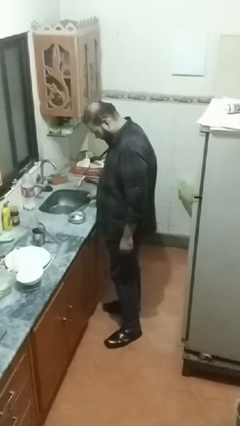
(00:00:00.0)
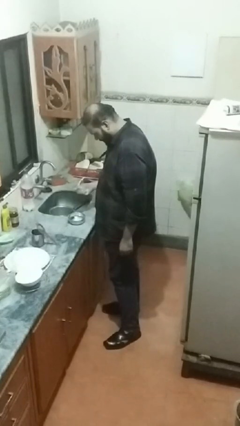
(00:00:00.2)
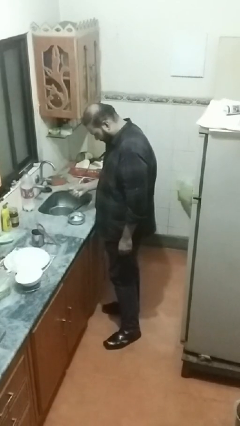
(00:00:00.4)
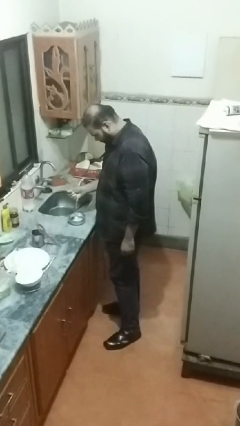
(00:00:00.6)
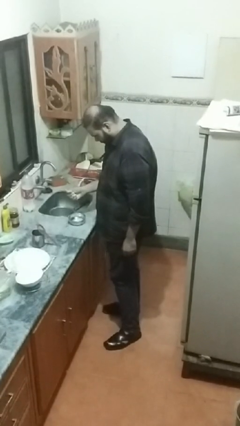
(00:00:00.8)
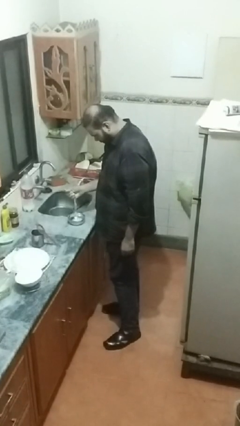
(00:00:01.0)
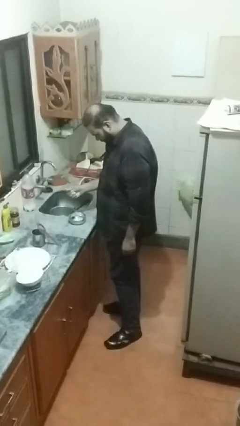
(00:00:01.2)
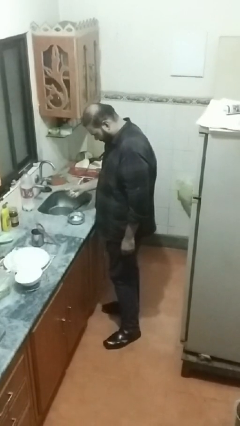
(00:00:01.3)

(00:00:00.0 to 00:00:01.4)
person pours into bowl

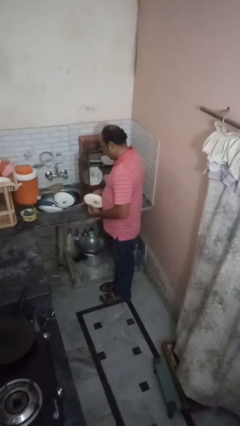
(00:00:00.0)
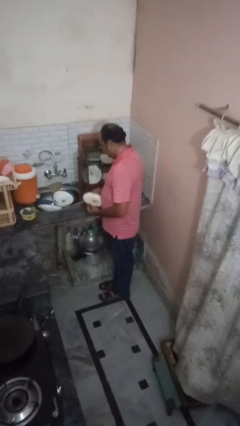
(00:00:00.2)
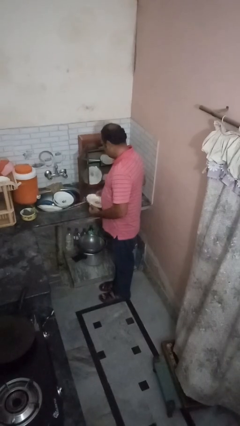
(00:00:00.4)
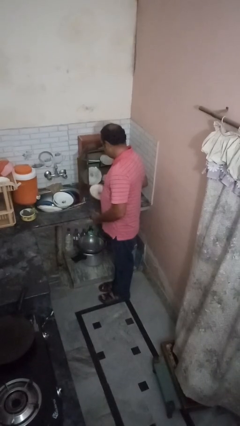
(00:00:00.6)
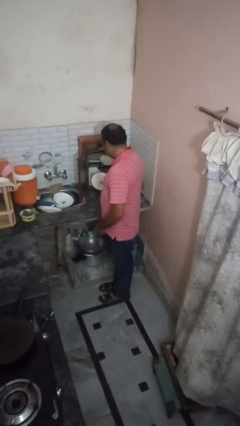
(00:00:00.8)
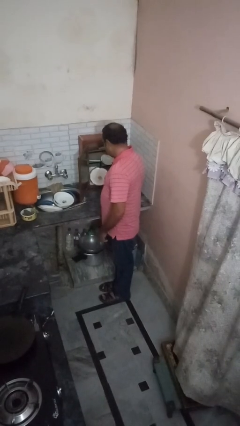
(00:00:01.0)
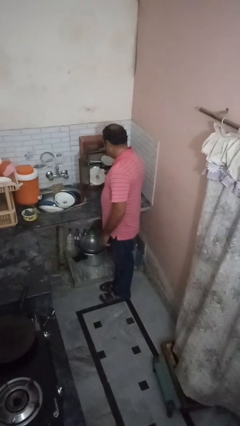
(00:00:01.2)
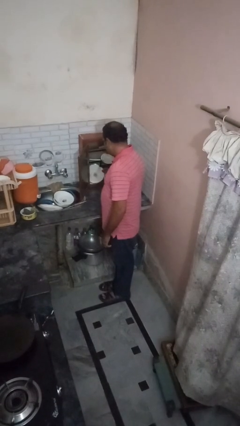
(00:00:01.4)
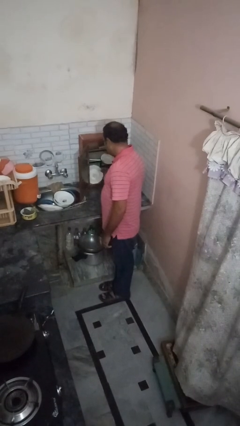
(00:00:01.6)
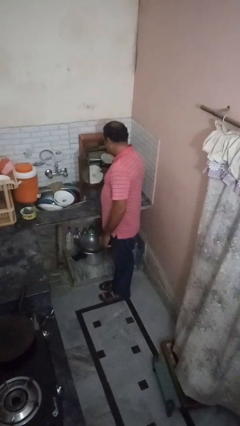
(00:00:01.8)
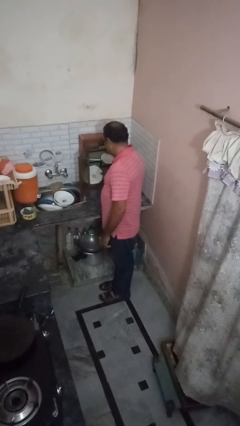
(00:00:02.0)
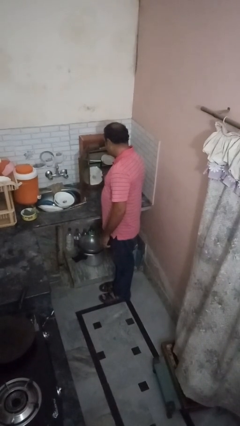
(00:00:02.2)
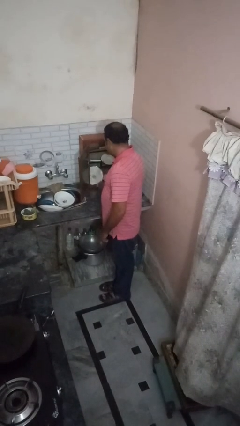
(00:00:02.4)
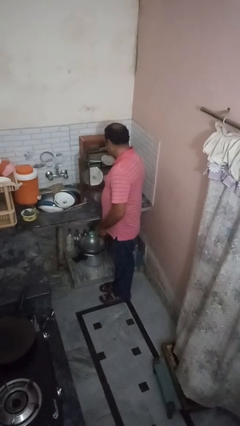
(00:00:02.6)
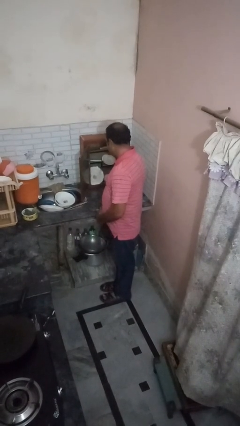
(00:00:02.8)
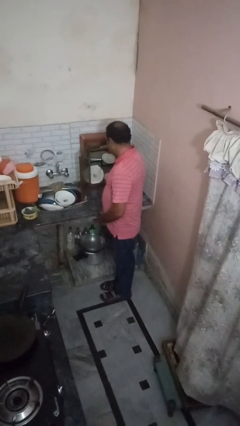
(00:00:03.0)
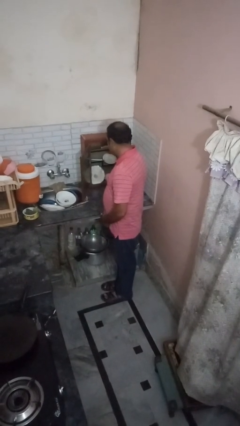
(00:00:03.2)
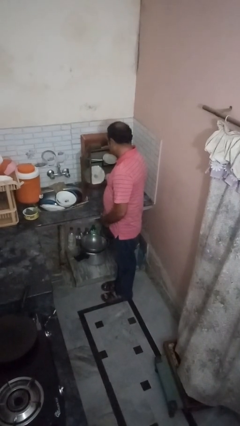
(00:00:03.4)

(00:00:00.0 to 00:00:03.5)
person takes object from cabinet

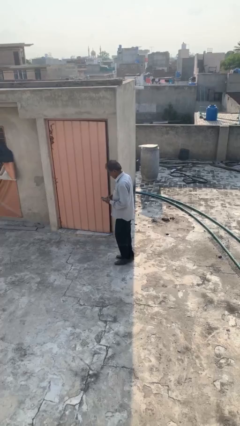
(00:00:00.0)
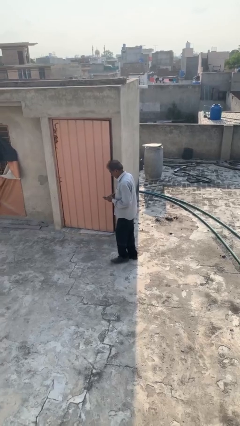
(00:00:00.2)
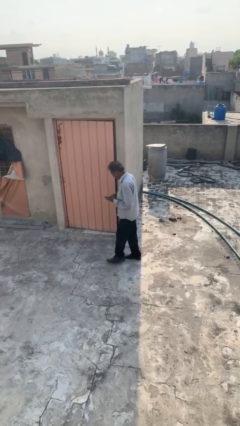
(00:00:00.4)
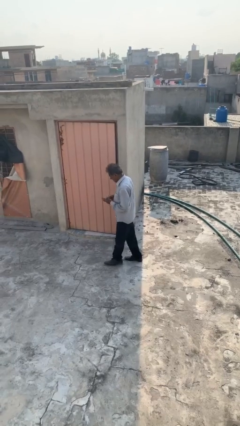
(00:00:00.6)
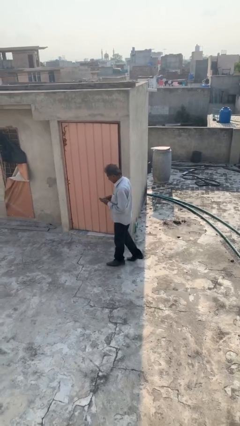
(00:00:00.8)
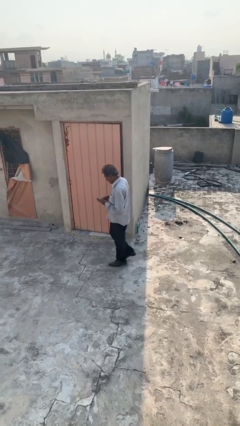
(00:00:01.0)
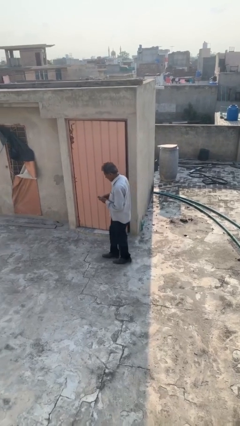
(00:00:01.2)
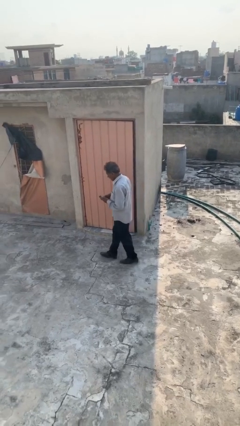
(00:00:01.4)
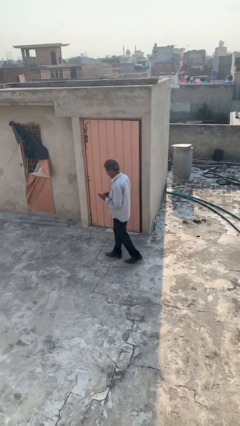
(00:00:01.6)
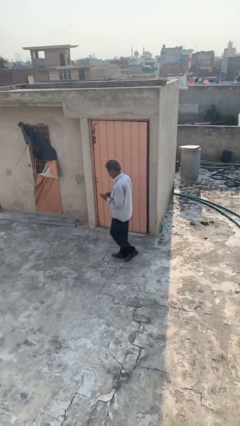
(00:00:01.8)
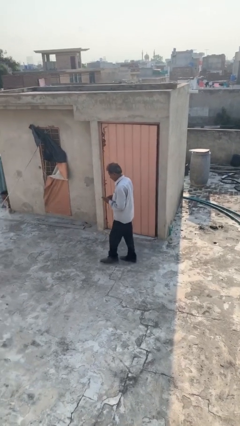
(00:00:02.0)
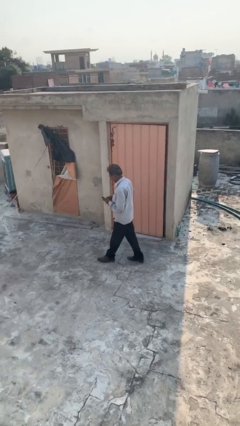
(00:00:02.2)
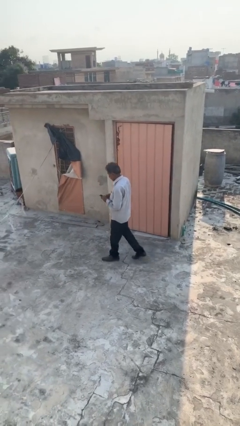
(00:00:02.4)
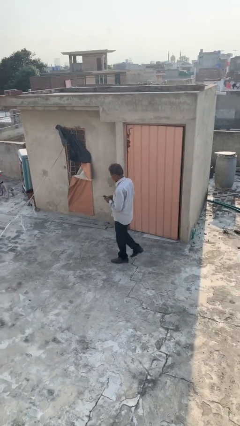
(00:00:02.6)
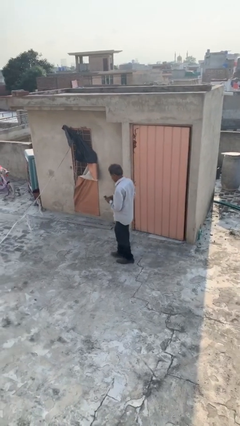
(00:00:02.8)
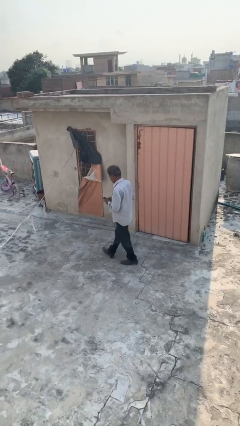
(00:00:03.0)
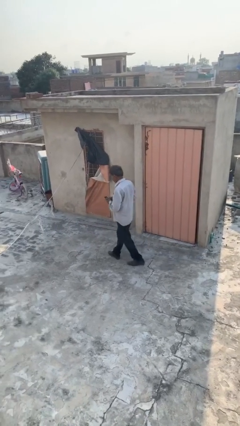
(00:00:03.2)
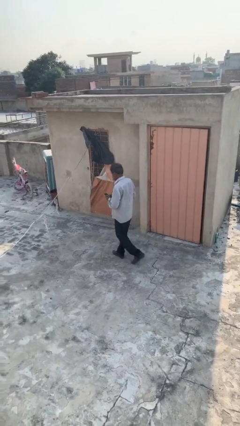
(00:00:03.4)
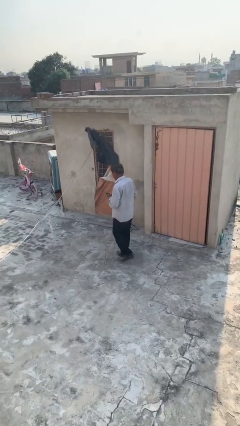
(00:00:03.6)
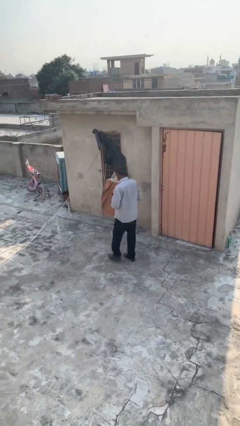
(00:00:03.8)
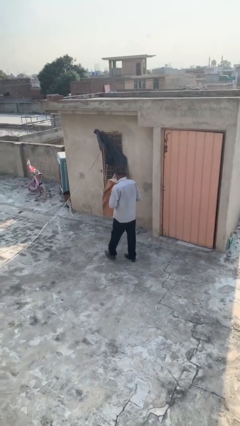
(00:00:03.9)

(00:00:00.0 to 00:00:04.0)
person texts on phone

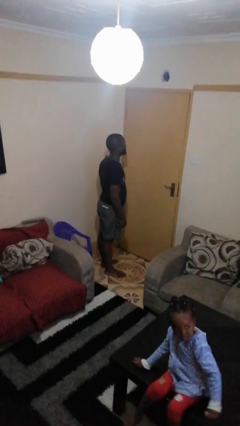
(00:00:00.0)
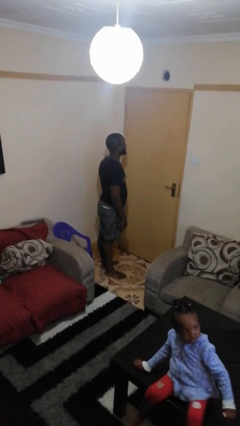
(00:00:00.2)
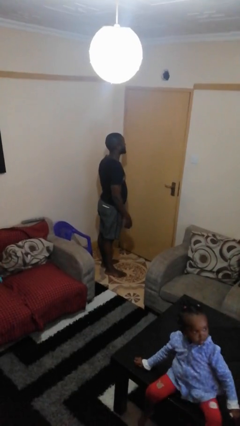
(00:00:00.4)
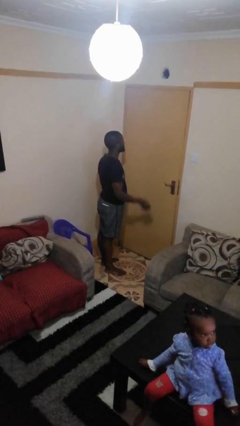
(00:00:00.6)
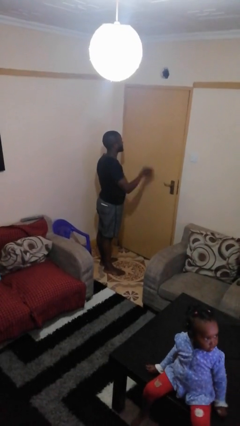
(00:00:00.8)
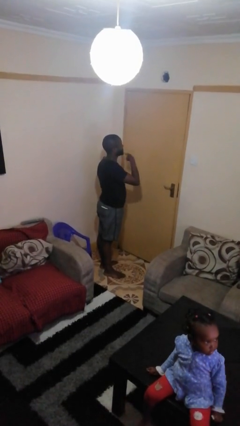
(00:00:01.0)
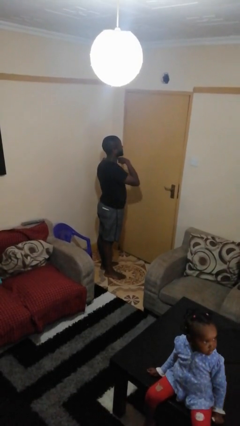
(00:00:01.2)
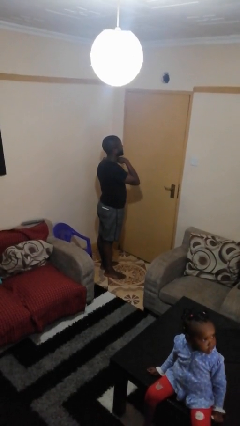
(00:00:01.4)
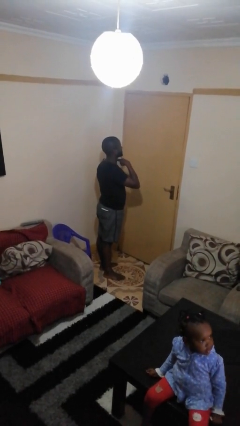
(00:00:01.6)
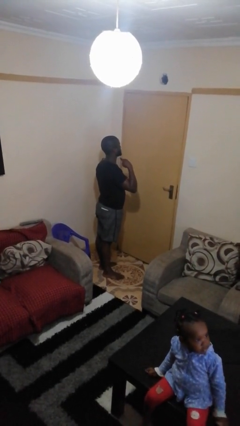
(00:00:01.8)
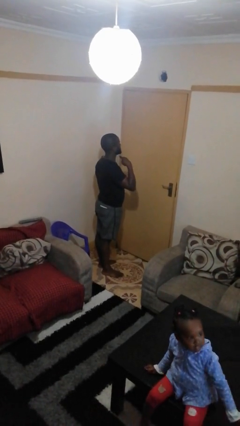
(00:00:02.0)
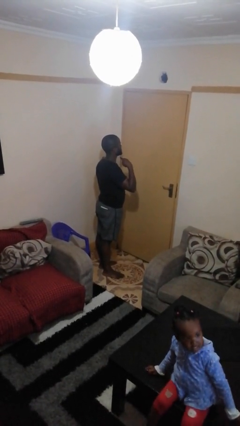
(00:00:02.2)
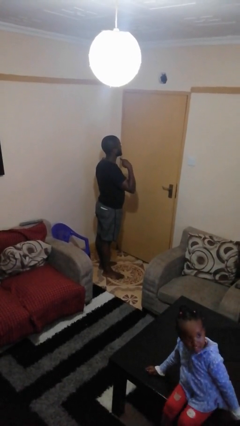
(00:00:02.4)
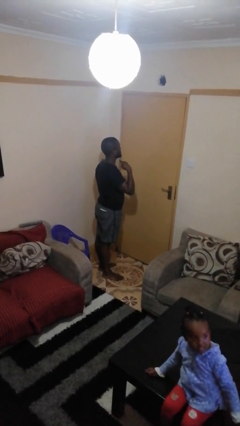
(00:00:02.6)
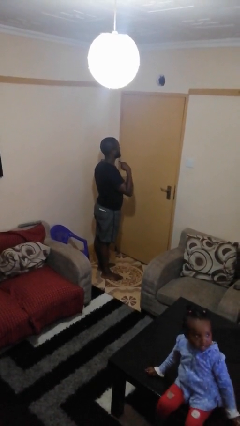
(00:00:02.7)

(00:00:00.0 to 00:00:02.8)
person gestures cut

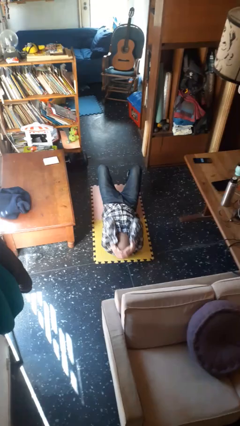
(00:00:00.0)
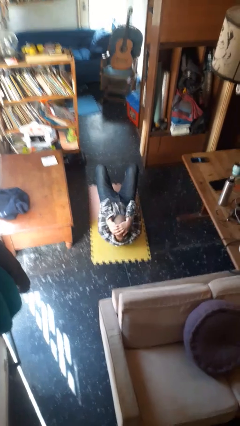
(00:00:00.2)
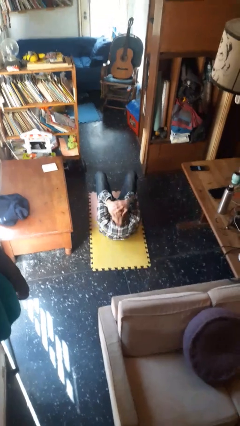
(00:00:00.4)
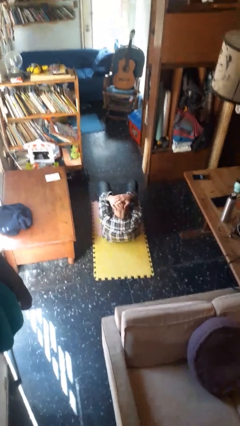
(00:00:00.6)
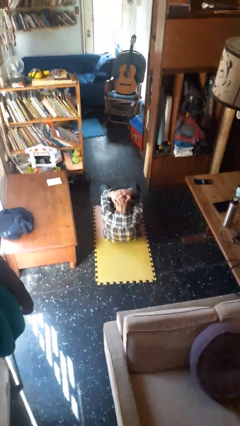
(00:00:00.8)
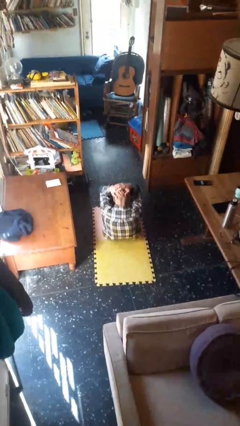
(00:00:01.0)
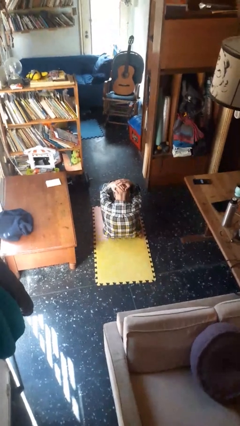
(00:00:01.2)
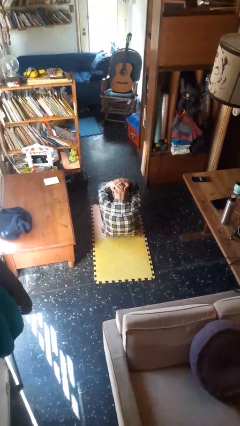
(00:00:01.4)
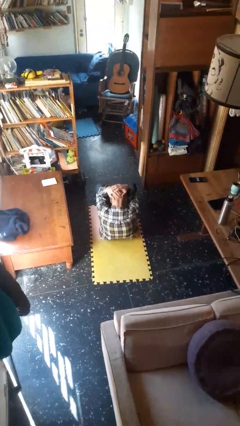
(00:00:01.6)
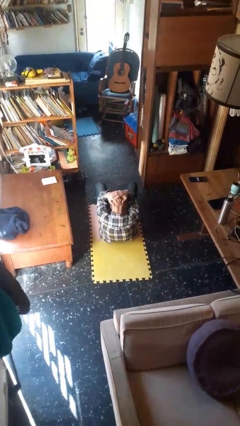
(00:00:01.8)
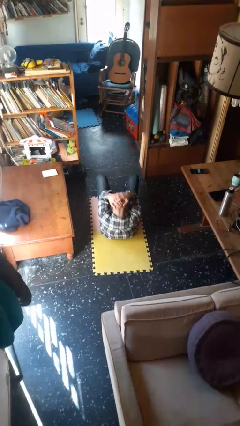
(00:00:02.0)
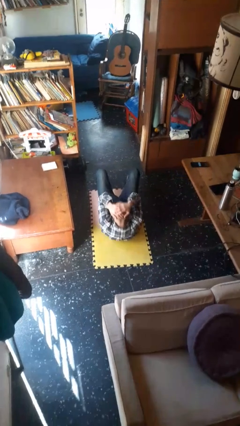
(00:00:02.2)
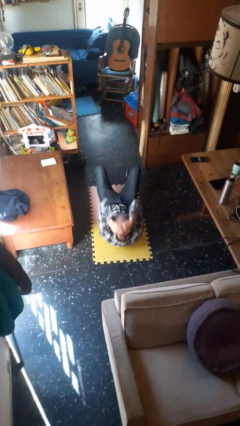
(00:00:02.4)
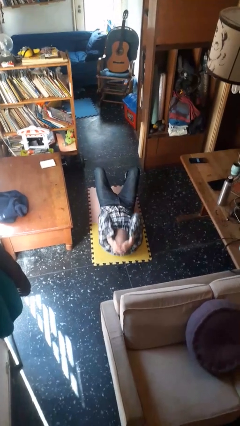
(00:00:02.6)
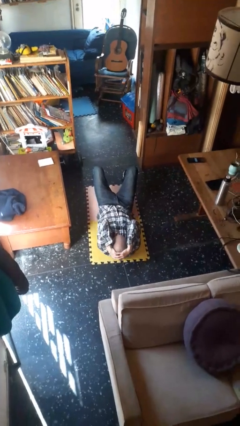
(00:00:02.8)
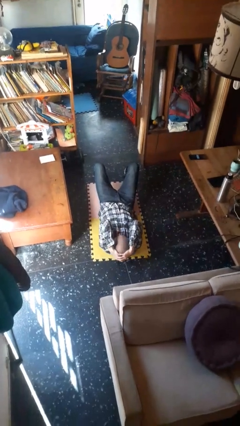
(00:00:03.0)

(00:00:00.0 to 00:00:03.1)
person exercises with situp

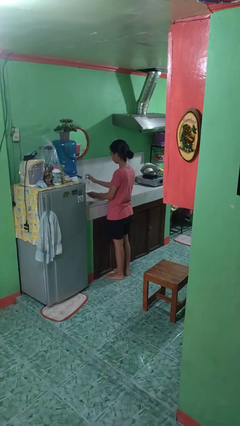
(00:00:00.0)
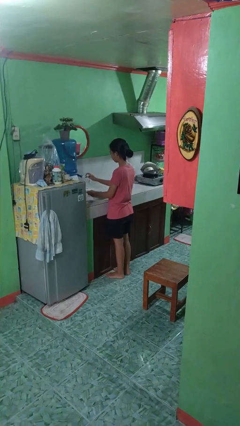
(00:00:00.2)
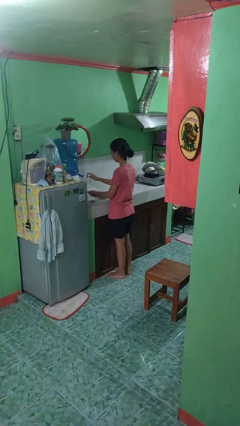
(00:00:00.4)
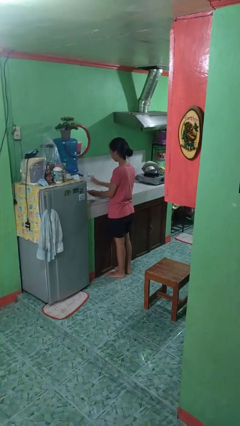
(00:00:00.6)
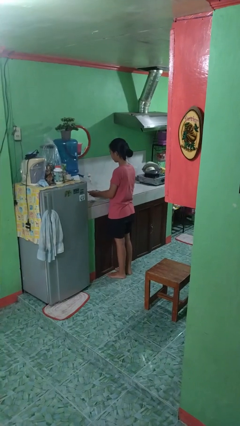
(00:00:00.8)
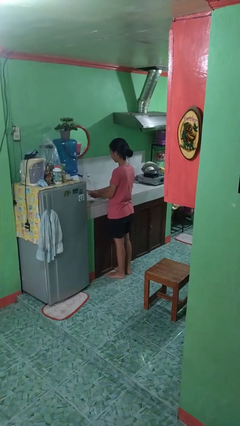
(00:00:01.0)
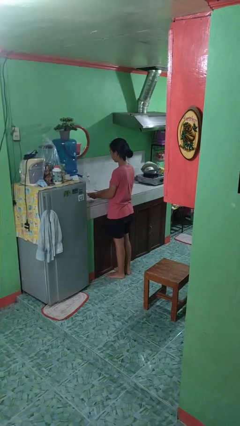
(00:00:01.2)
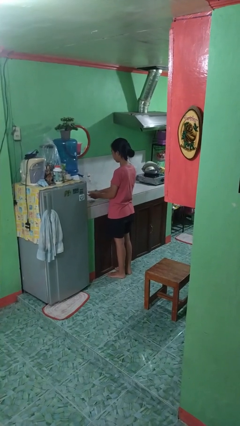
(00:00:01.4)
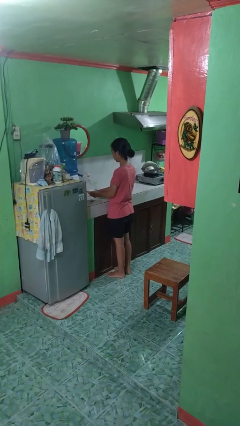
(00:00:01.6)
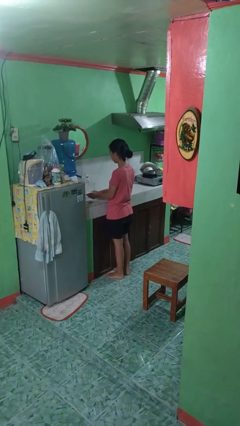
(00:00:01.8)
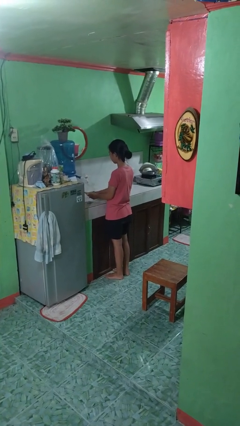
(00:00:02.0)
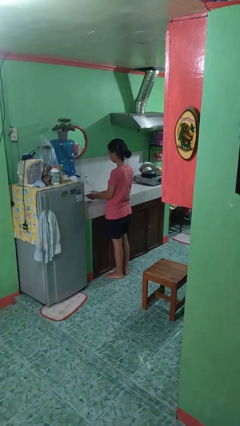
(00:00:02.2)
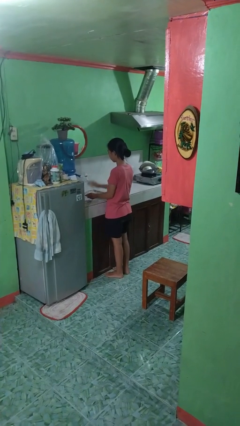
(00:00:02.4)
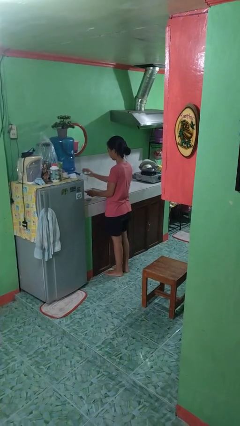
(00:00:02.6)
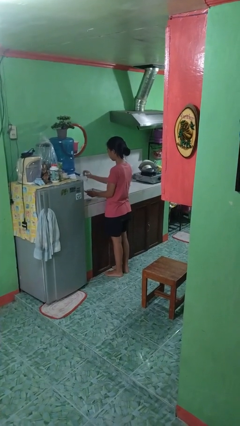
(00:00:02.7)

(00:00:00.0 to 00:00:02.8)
person washes dish
